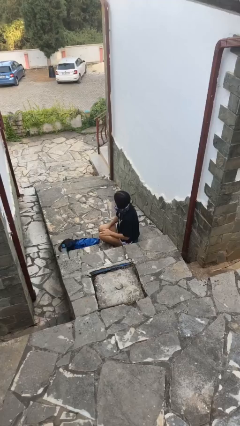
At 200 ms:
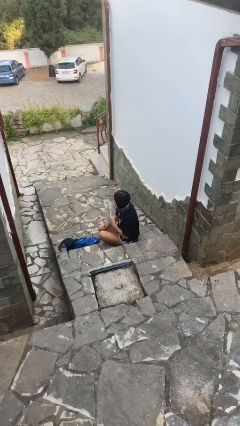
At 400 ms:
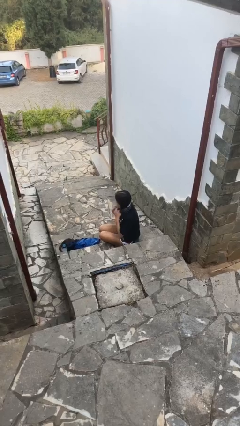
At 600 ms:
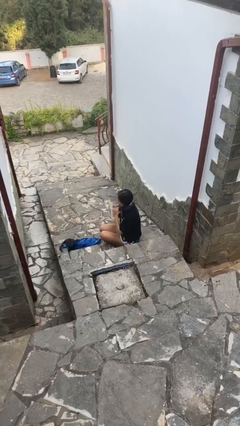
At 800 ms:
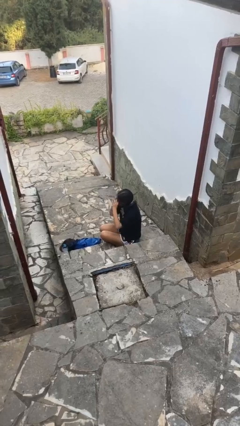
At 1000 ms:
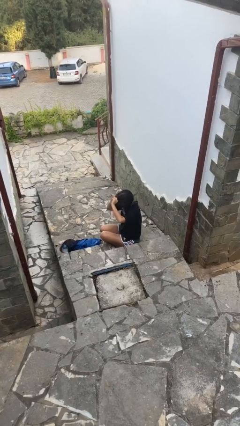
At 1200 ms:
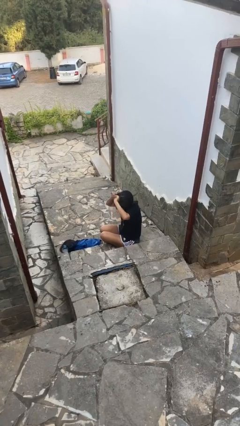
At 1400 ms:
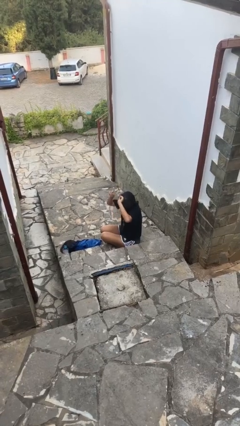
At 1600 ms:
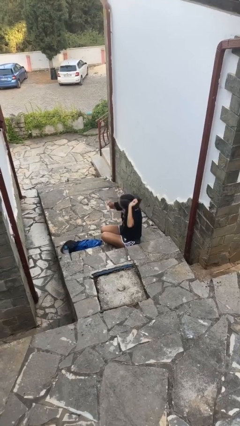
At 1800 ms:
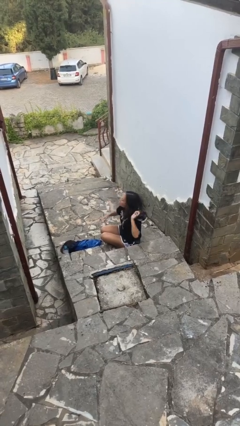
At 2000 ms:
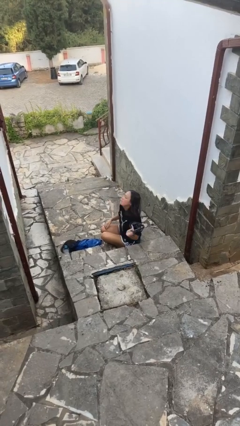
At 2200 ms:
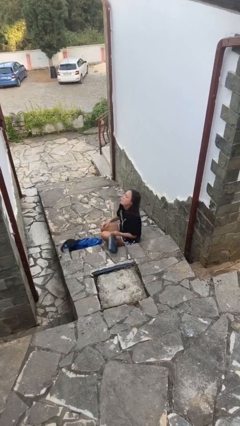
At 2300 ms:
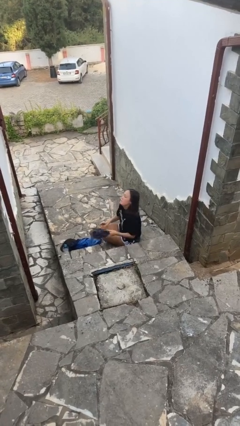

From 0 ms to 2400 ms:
person takes off scarf

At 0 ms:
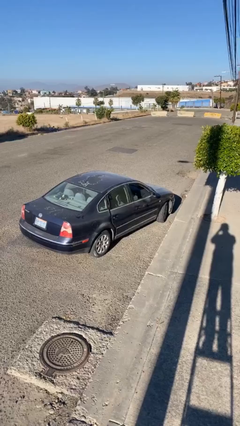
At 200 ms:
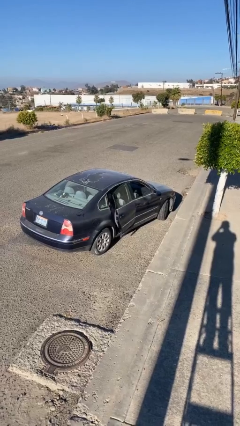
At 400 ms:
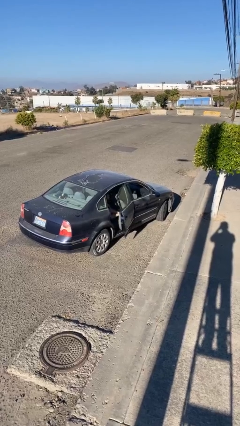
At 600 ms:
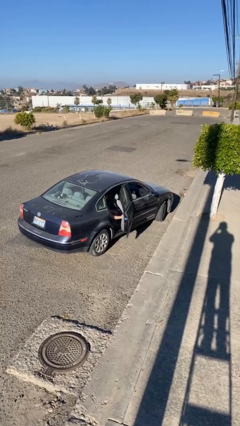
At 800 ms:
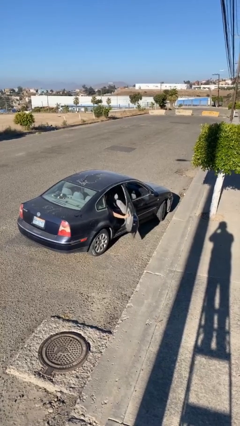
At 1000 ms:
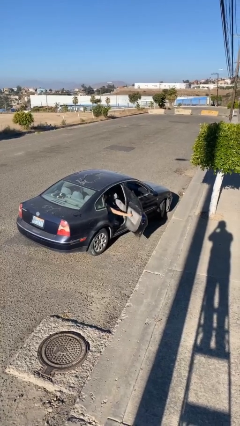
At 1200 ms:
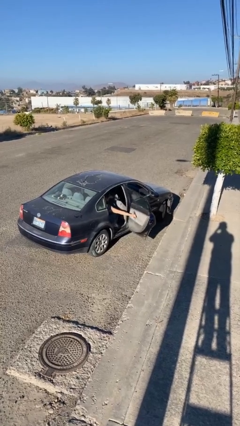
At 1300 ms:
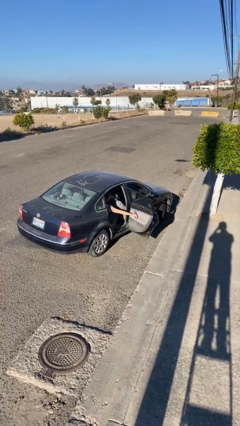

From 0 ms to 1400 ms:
person opens car door

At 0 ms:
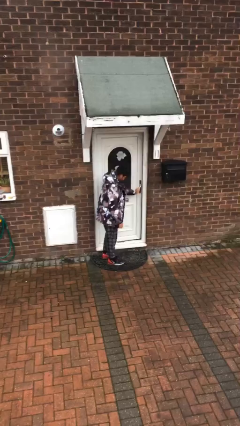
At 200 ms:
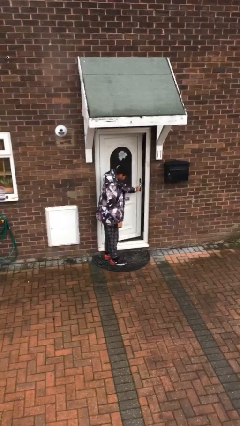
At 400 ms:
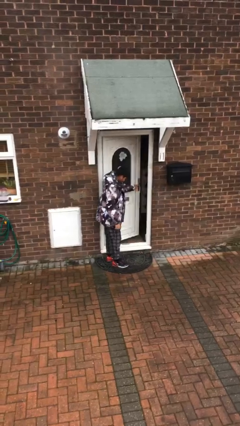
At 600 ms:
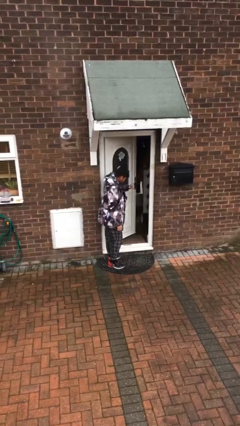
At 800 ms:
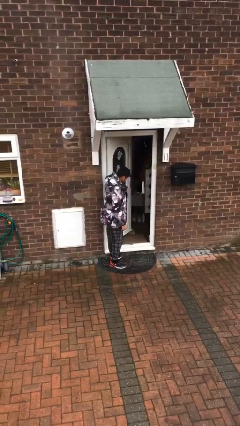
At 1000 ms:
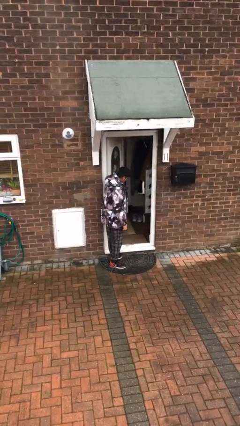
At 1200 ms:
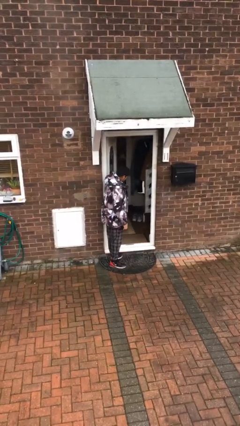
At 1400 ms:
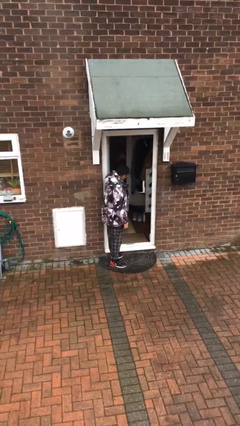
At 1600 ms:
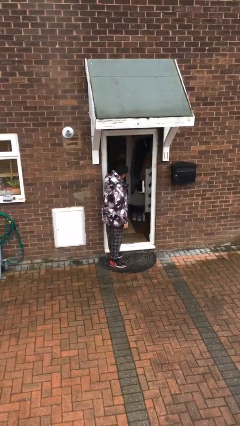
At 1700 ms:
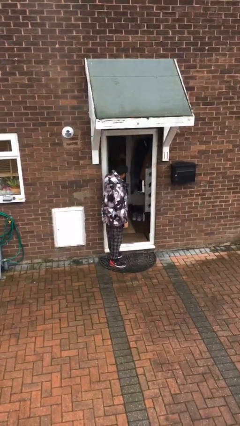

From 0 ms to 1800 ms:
person opens facility door

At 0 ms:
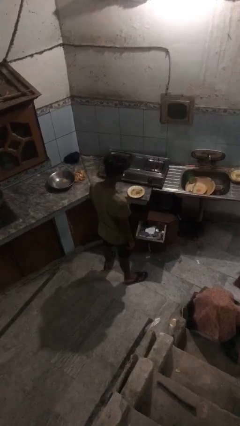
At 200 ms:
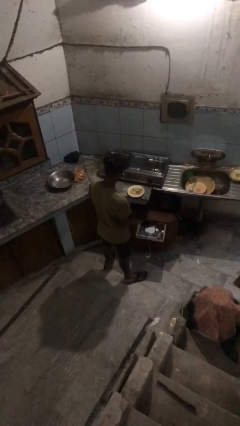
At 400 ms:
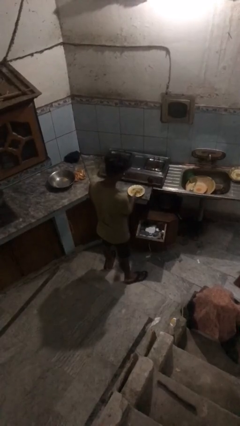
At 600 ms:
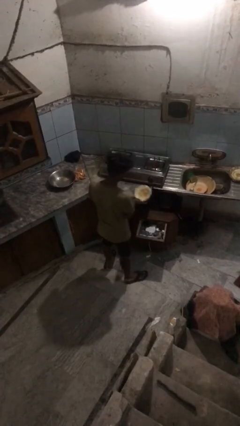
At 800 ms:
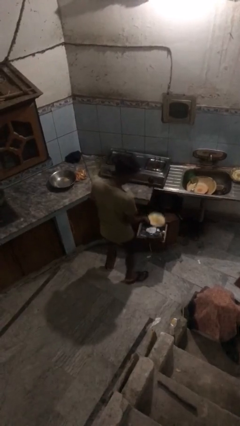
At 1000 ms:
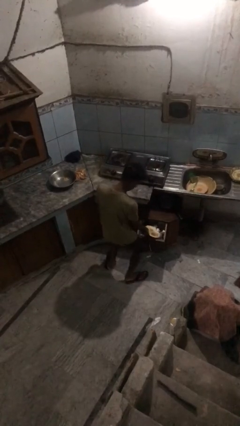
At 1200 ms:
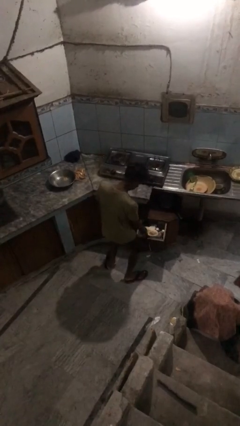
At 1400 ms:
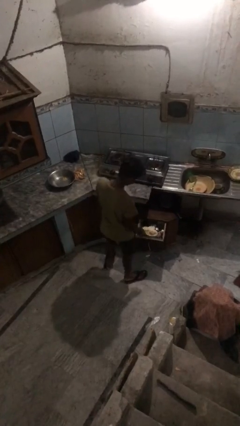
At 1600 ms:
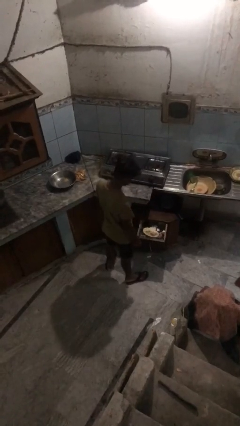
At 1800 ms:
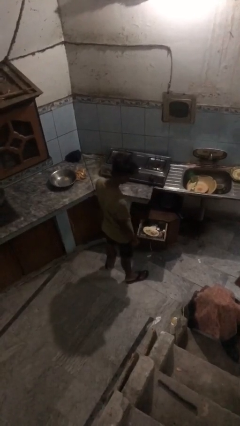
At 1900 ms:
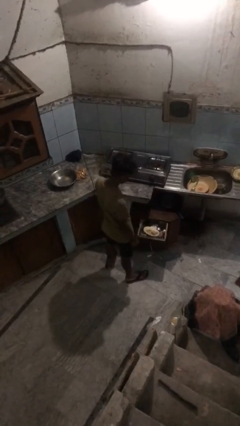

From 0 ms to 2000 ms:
person puts object into kitchen drawer

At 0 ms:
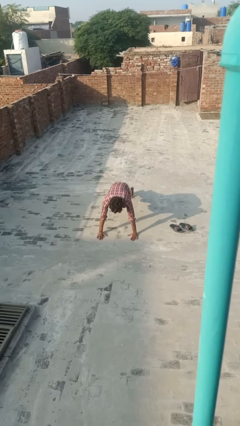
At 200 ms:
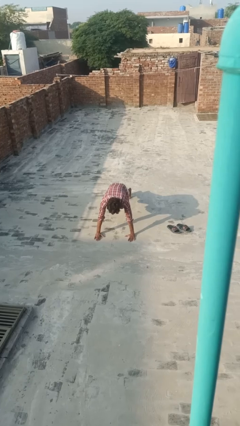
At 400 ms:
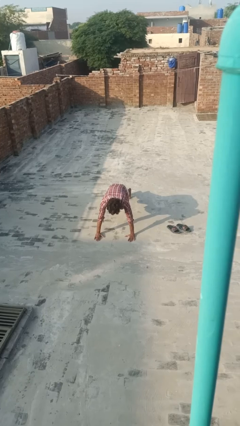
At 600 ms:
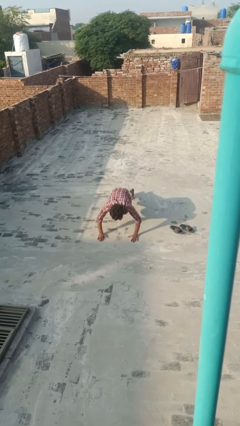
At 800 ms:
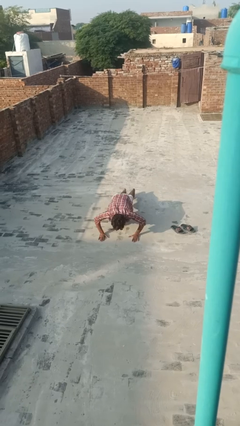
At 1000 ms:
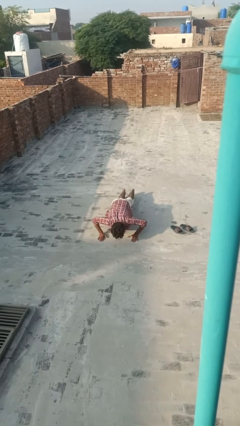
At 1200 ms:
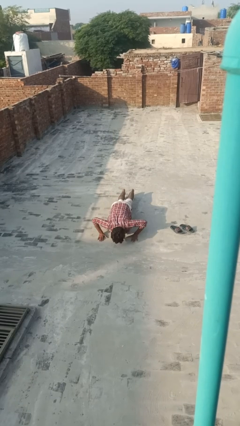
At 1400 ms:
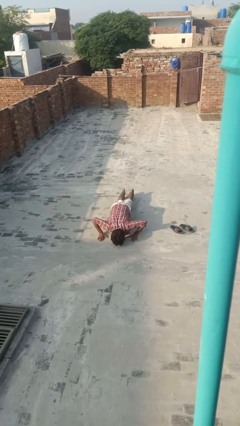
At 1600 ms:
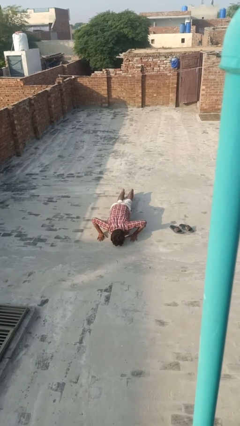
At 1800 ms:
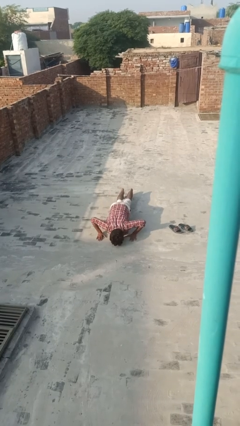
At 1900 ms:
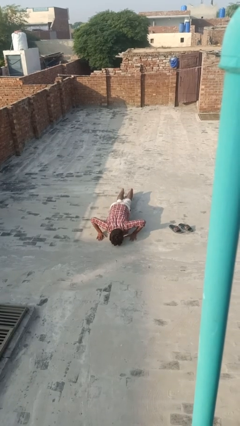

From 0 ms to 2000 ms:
person exercises with pushup

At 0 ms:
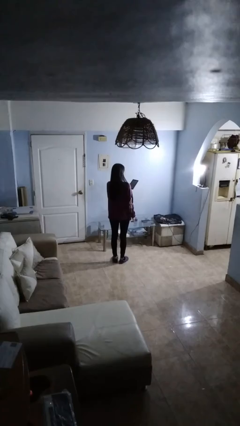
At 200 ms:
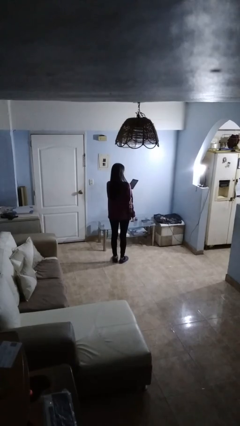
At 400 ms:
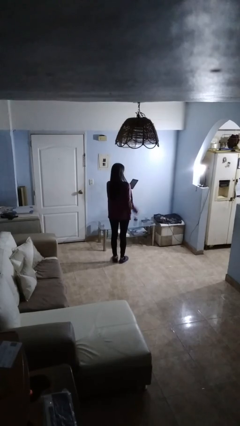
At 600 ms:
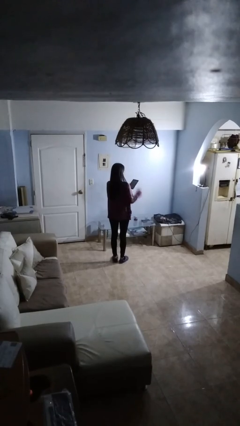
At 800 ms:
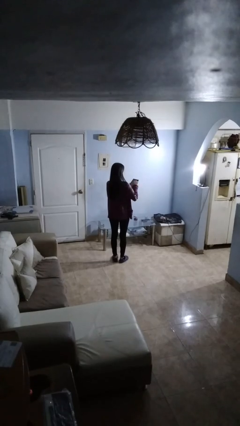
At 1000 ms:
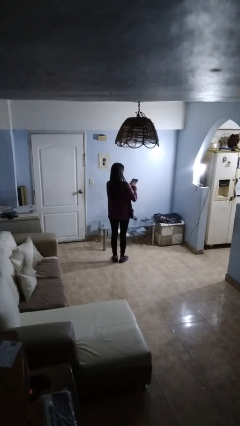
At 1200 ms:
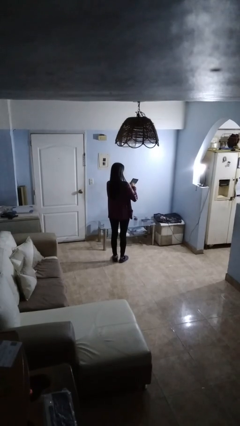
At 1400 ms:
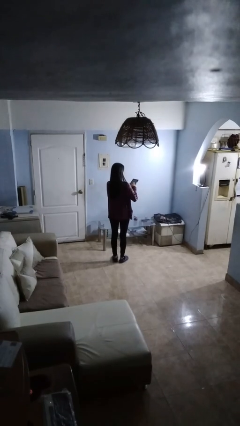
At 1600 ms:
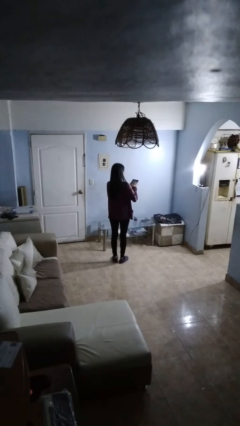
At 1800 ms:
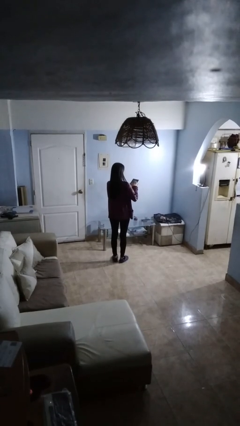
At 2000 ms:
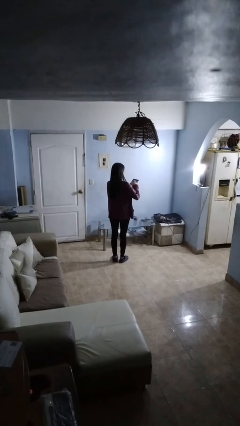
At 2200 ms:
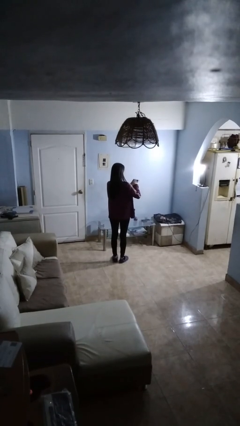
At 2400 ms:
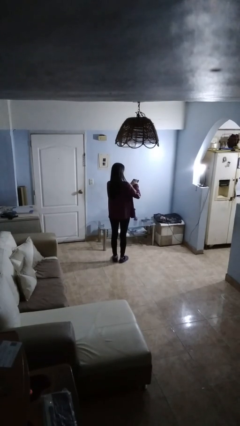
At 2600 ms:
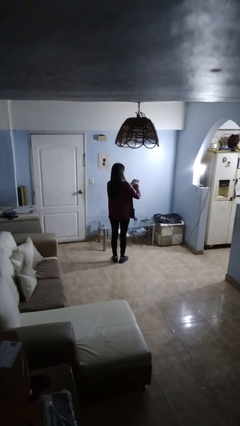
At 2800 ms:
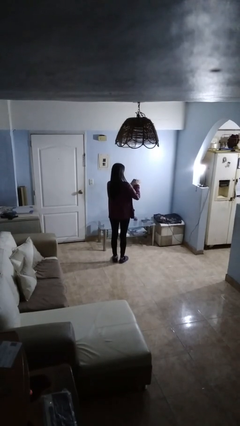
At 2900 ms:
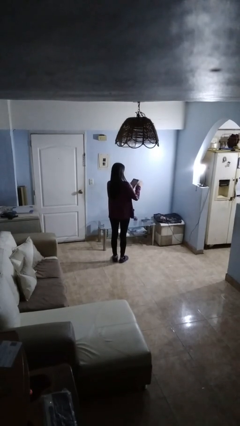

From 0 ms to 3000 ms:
person interacts with tablet

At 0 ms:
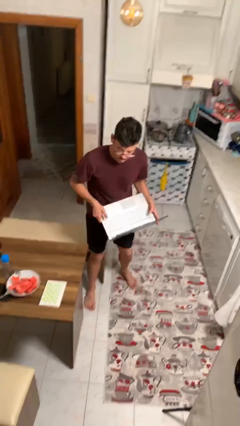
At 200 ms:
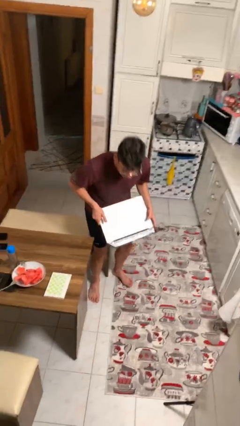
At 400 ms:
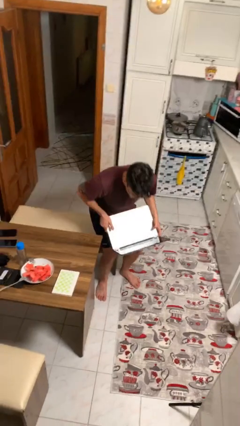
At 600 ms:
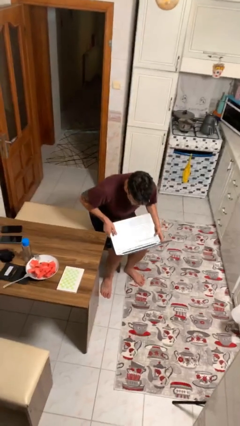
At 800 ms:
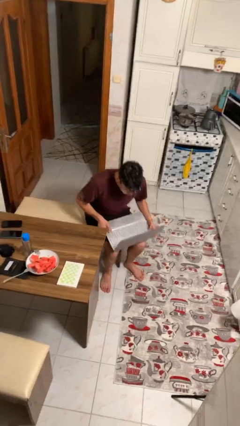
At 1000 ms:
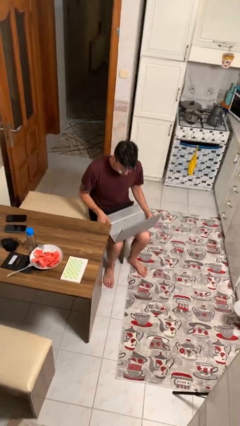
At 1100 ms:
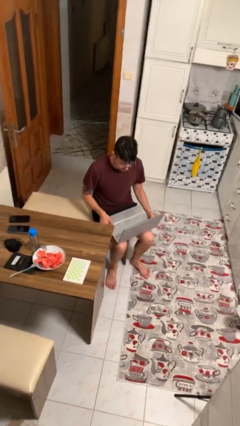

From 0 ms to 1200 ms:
person sits down

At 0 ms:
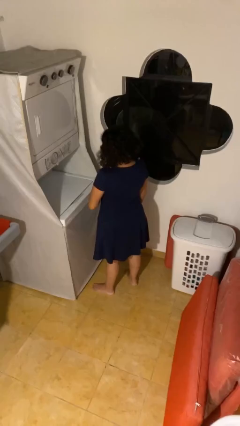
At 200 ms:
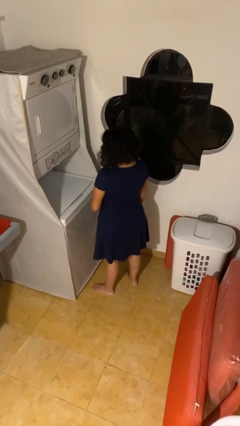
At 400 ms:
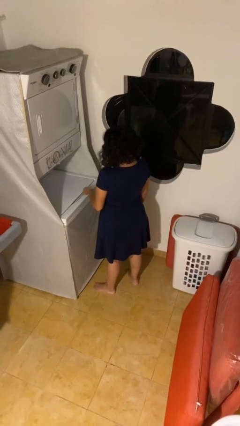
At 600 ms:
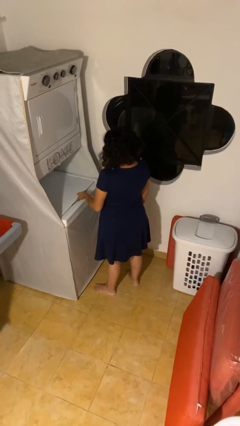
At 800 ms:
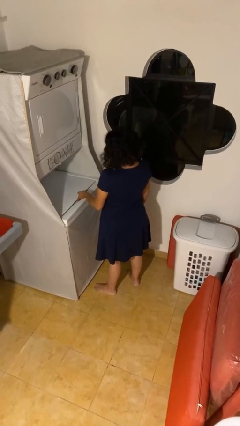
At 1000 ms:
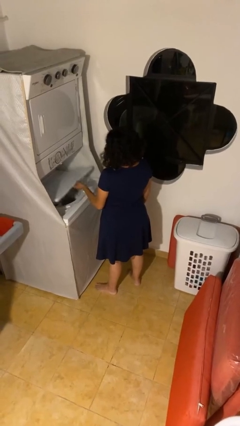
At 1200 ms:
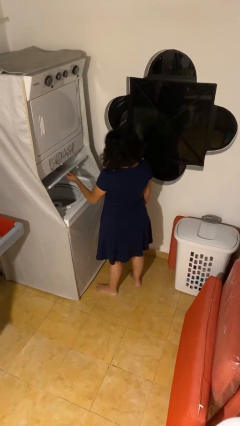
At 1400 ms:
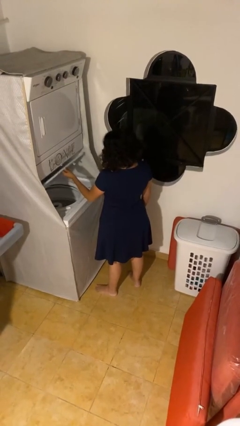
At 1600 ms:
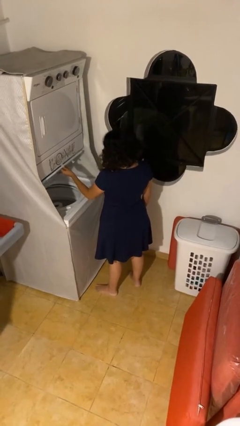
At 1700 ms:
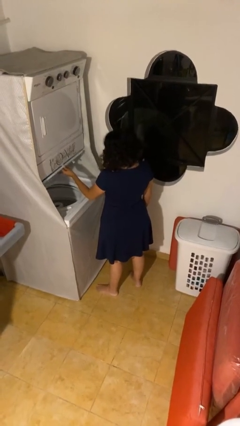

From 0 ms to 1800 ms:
person opens clothes washer

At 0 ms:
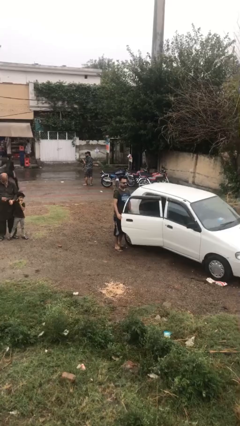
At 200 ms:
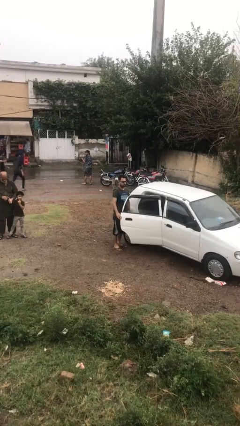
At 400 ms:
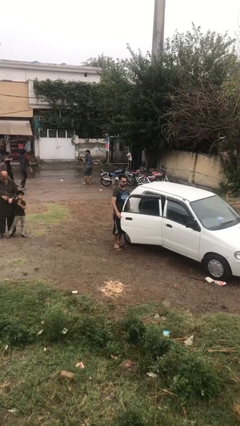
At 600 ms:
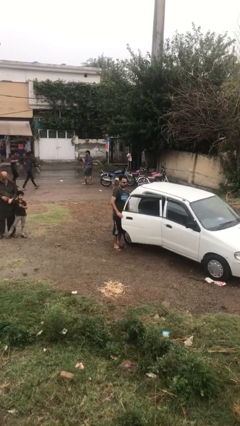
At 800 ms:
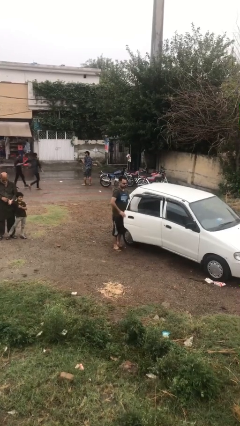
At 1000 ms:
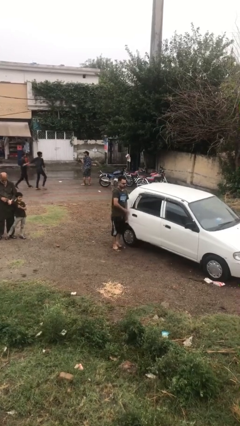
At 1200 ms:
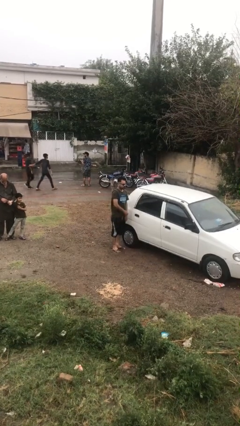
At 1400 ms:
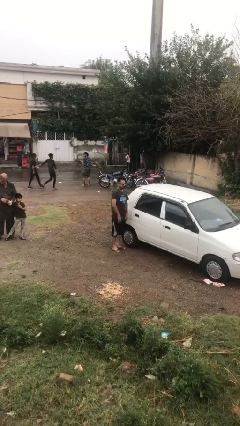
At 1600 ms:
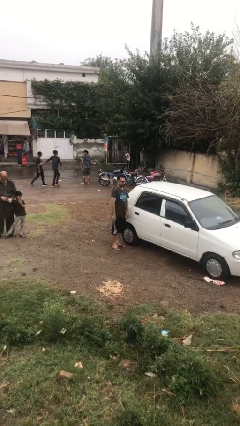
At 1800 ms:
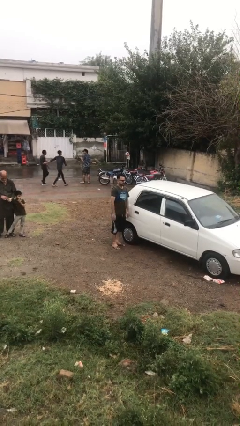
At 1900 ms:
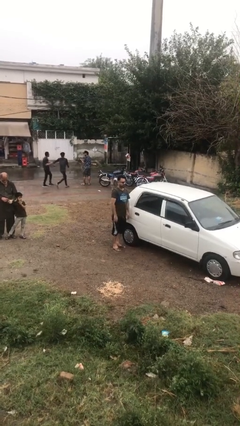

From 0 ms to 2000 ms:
person closes car door
